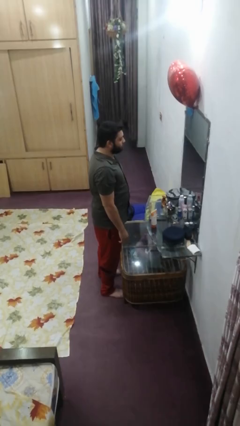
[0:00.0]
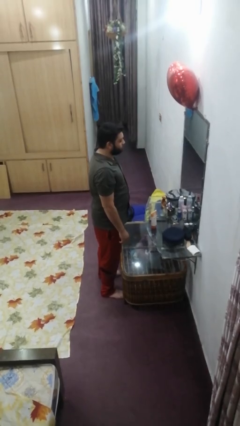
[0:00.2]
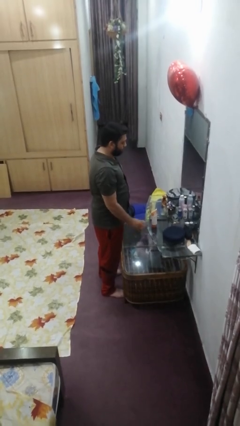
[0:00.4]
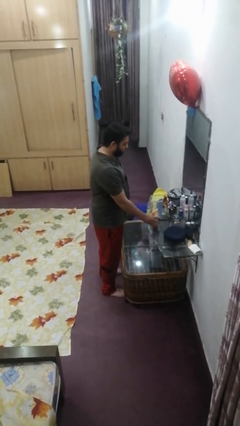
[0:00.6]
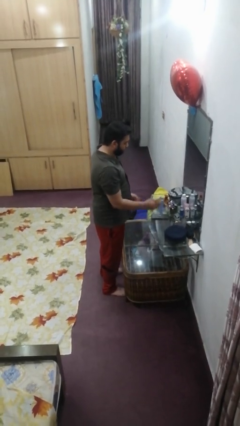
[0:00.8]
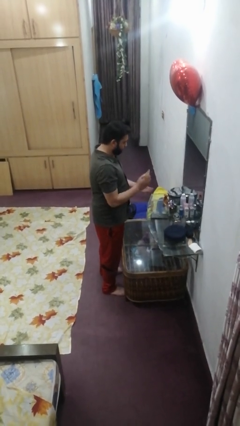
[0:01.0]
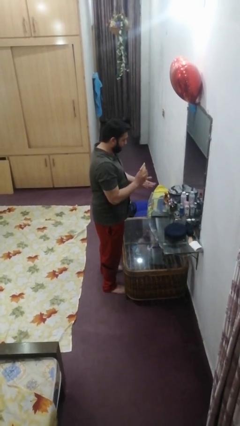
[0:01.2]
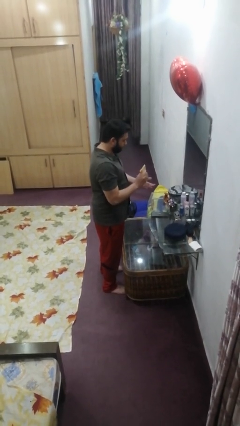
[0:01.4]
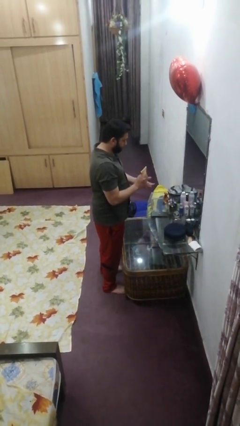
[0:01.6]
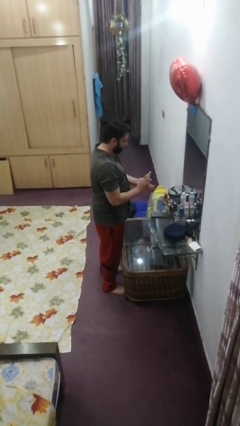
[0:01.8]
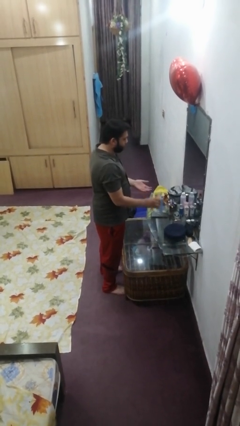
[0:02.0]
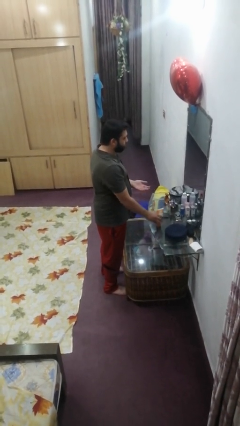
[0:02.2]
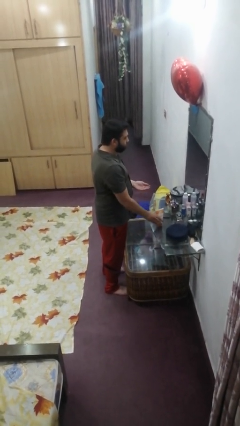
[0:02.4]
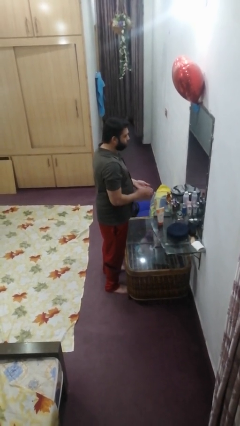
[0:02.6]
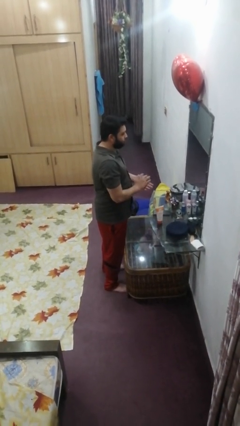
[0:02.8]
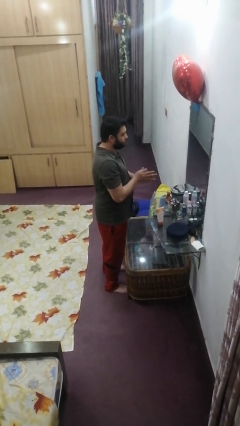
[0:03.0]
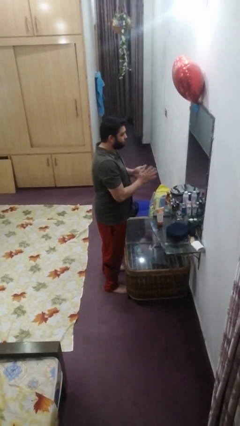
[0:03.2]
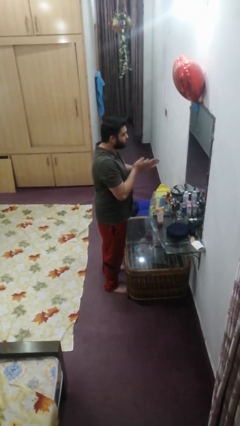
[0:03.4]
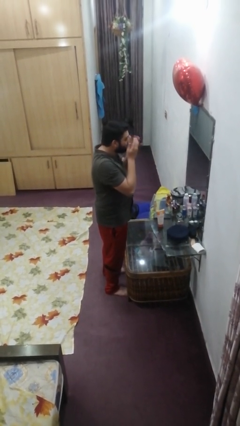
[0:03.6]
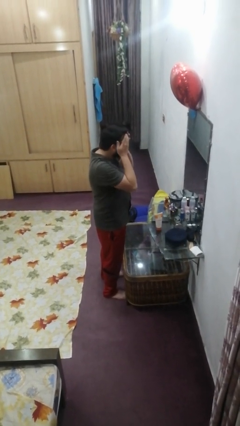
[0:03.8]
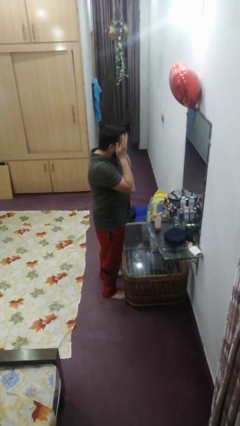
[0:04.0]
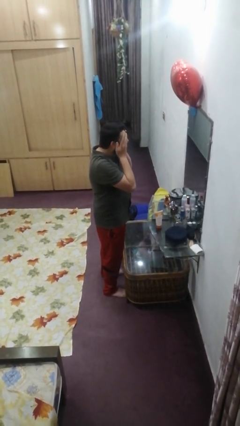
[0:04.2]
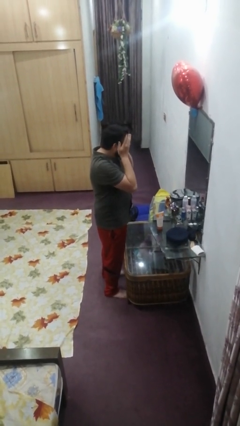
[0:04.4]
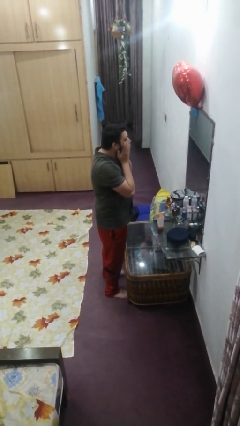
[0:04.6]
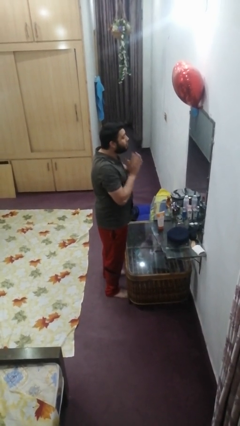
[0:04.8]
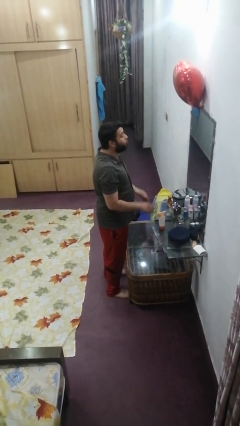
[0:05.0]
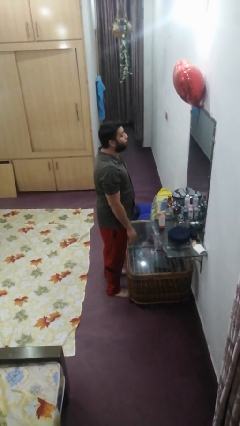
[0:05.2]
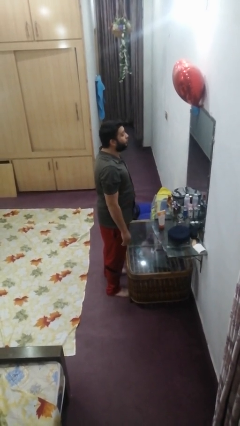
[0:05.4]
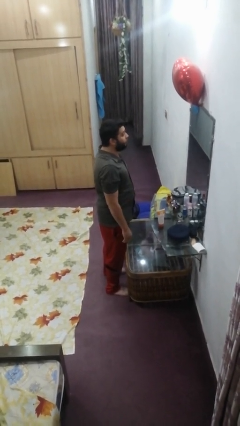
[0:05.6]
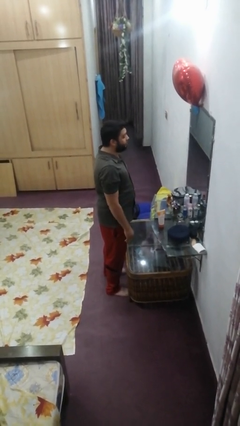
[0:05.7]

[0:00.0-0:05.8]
person applies facial moisturizer

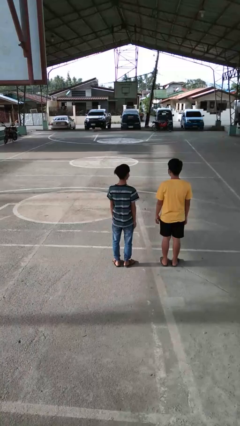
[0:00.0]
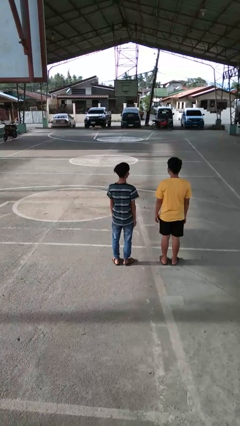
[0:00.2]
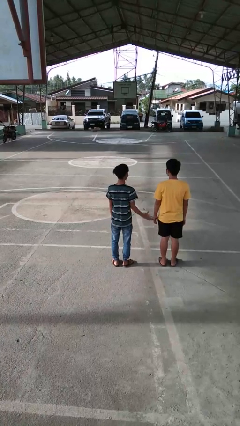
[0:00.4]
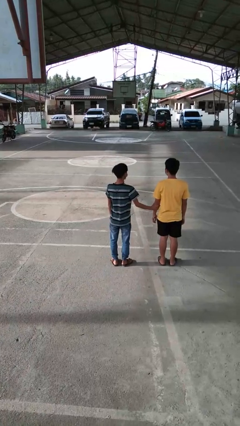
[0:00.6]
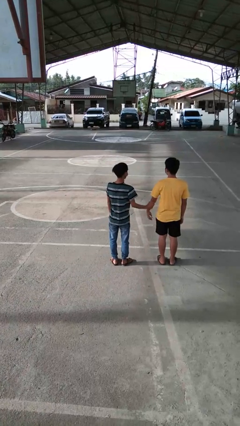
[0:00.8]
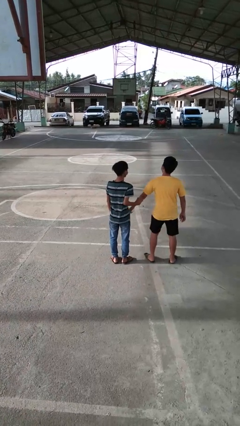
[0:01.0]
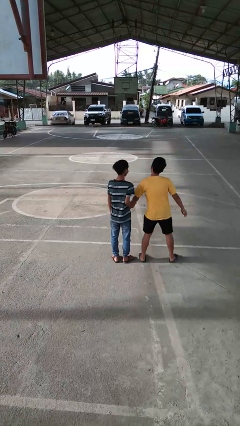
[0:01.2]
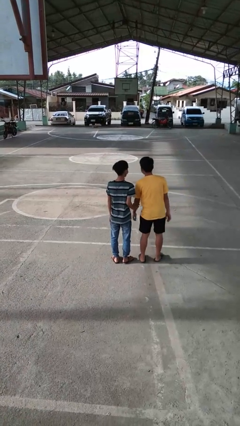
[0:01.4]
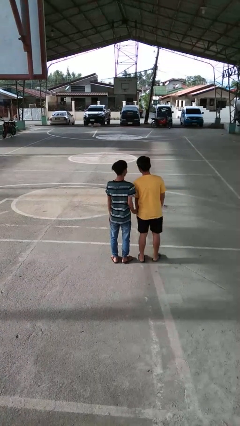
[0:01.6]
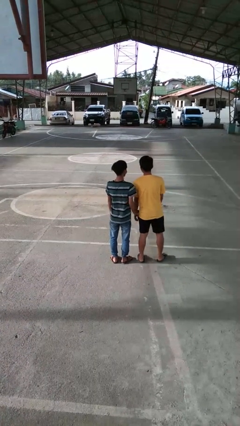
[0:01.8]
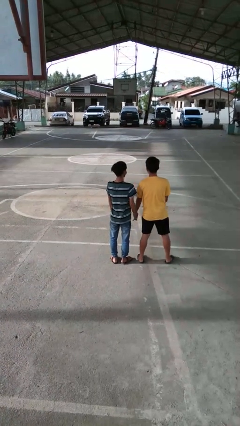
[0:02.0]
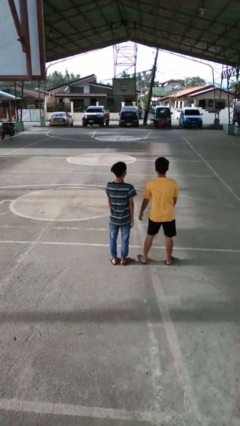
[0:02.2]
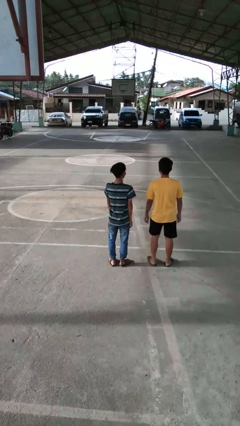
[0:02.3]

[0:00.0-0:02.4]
person grabs person by forearm

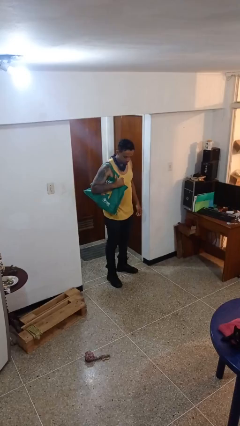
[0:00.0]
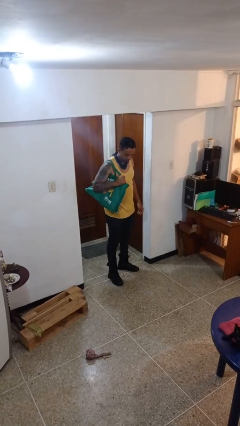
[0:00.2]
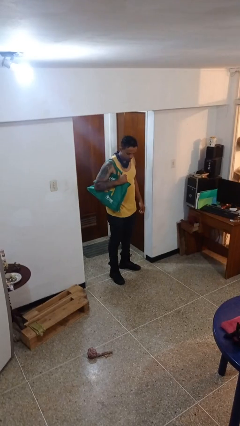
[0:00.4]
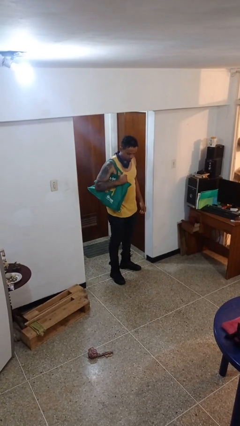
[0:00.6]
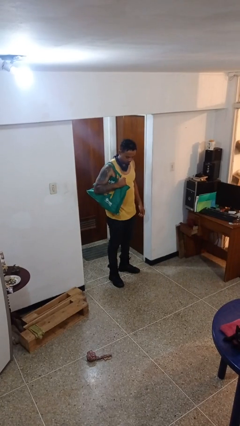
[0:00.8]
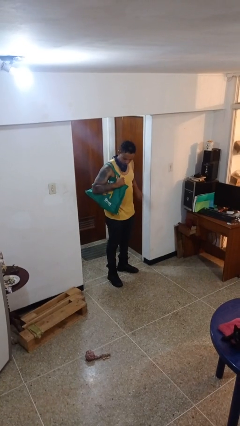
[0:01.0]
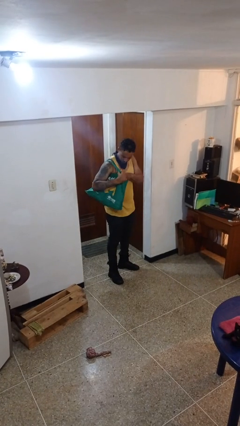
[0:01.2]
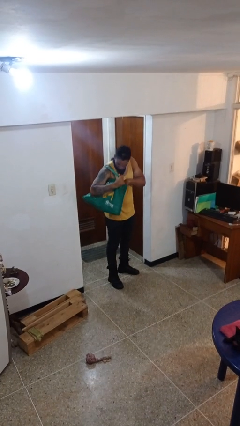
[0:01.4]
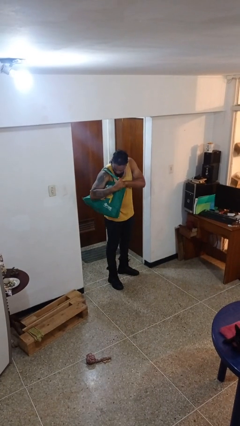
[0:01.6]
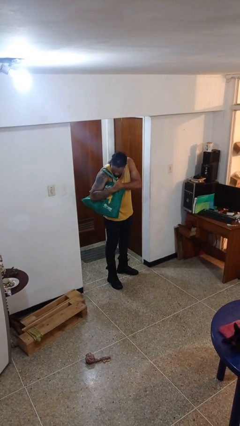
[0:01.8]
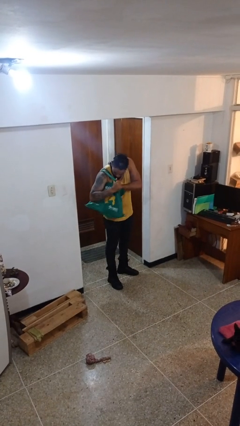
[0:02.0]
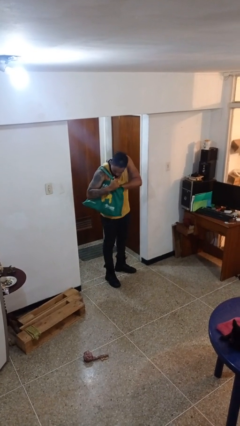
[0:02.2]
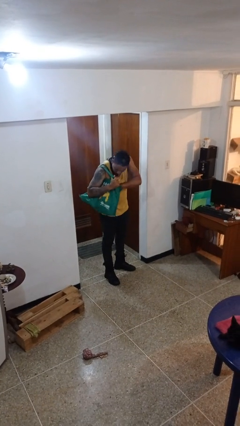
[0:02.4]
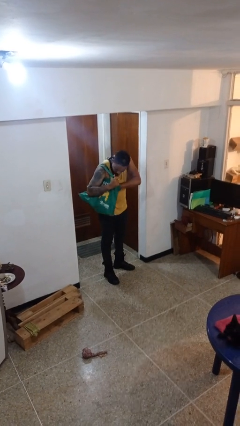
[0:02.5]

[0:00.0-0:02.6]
person searches in purse

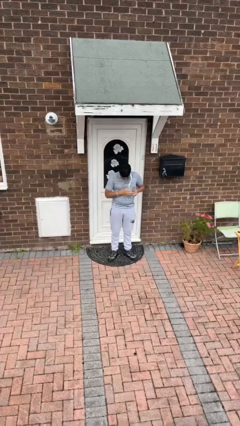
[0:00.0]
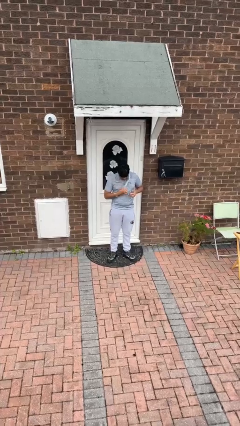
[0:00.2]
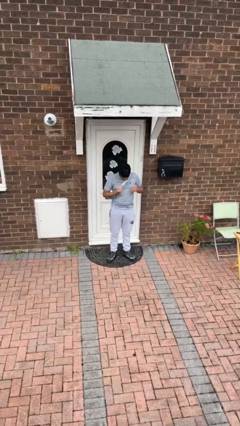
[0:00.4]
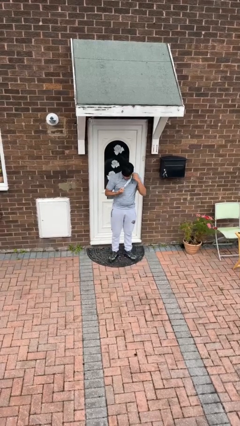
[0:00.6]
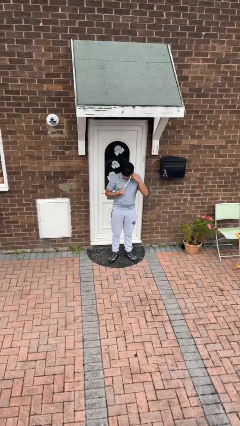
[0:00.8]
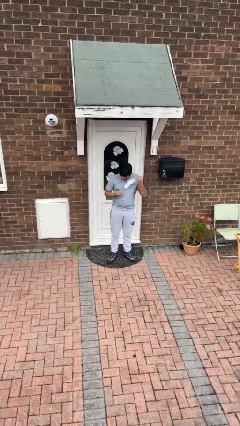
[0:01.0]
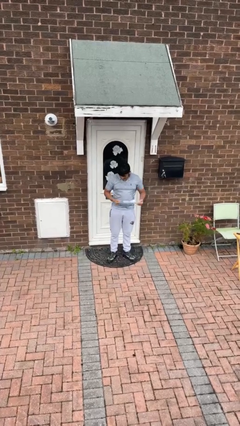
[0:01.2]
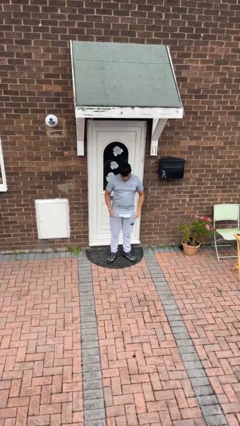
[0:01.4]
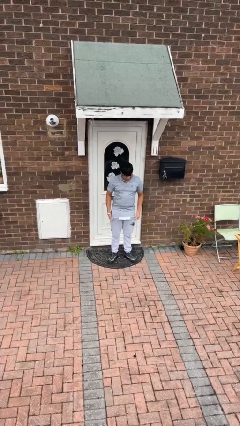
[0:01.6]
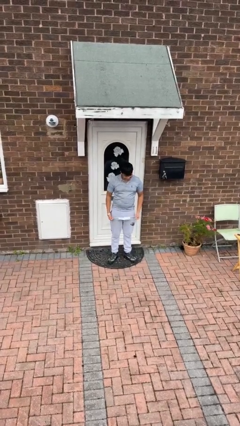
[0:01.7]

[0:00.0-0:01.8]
person takes off facemask

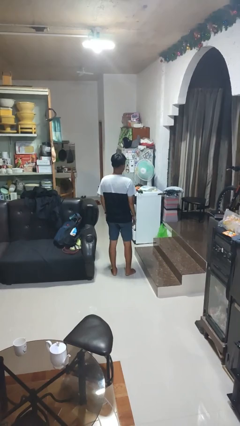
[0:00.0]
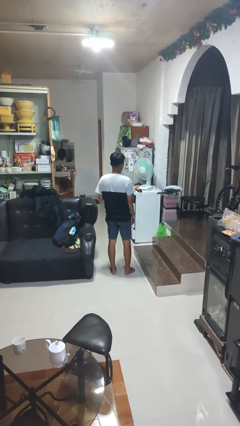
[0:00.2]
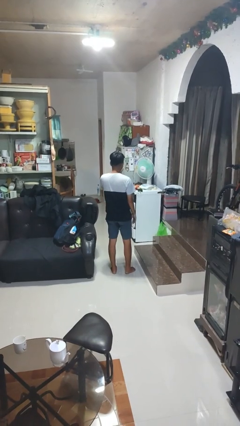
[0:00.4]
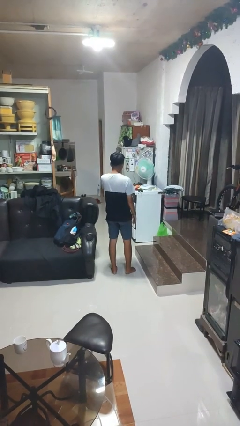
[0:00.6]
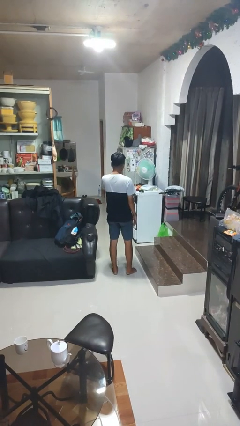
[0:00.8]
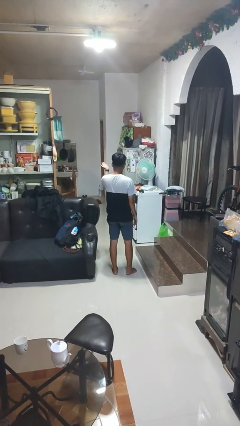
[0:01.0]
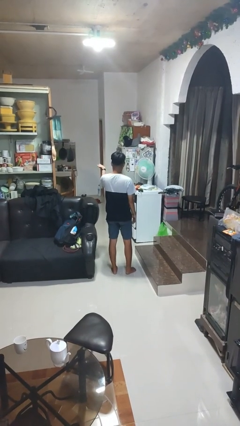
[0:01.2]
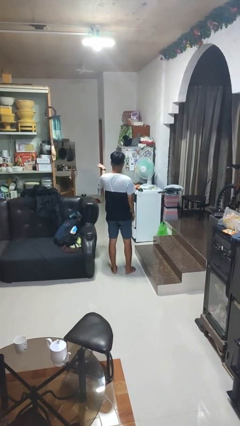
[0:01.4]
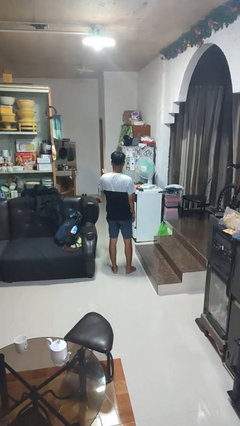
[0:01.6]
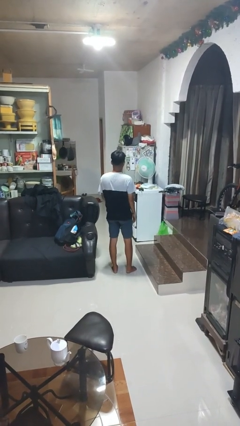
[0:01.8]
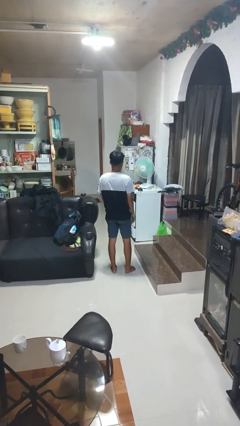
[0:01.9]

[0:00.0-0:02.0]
person gestures blow kiss

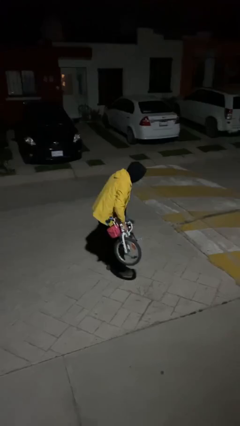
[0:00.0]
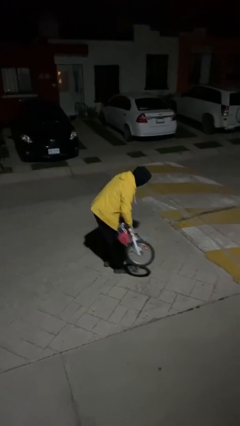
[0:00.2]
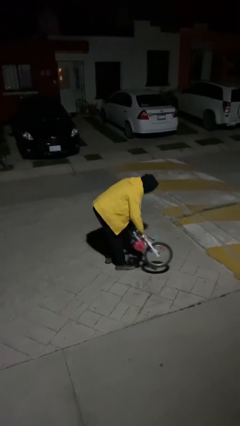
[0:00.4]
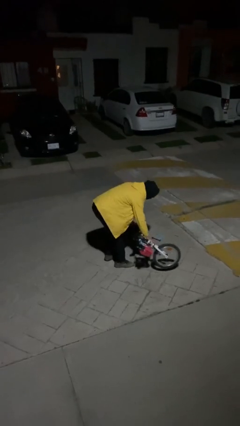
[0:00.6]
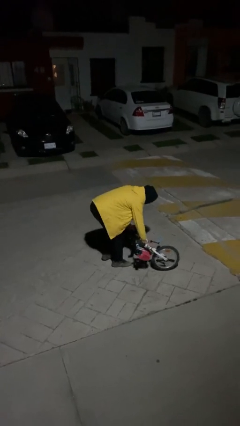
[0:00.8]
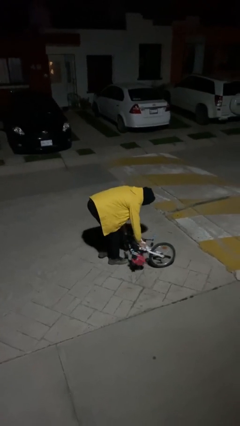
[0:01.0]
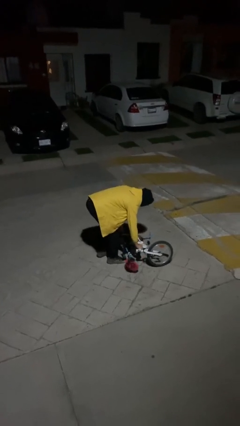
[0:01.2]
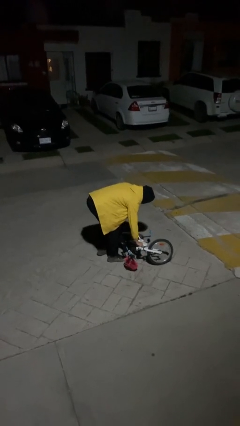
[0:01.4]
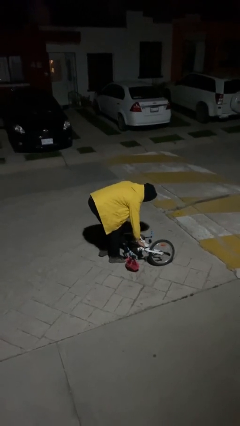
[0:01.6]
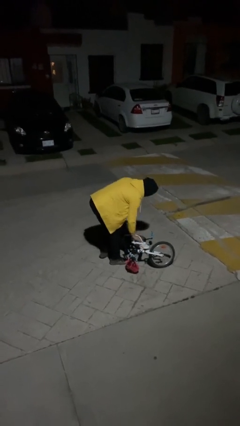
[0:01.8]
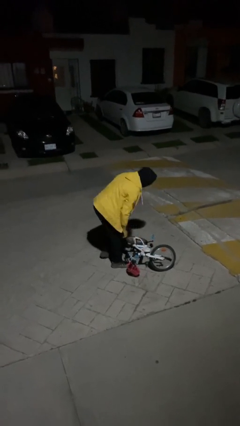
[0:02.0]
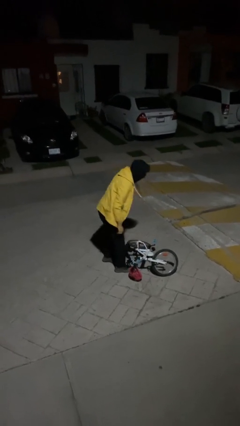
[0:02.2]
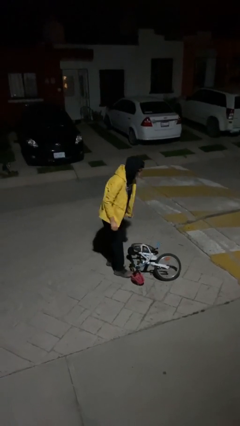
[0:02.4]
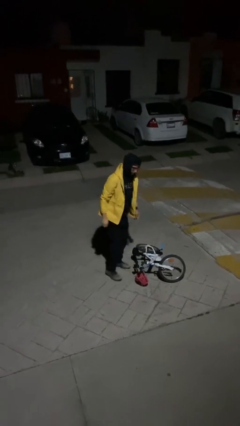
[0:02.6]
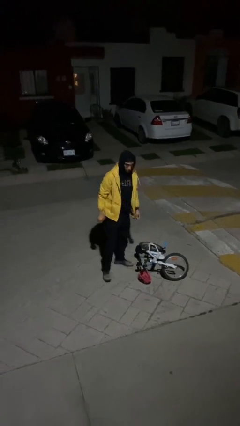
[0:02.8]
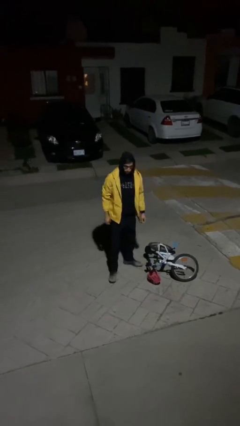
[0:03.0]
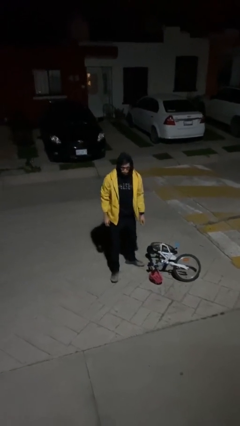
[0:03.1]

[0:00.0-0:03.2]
person puts down object on floor
